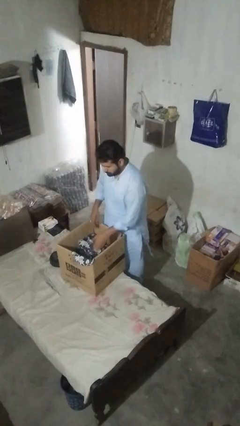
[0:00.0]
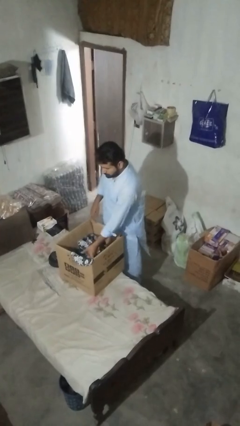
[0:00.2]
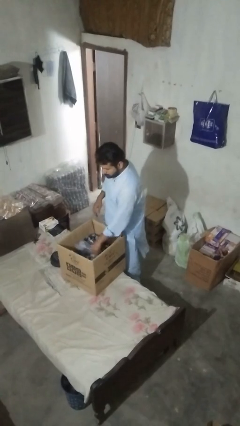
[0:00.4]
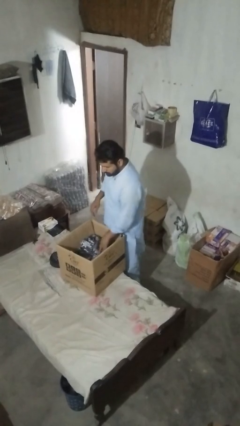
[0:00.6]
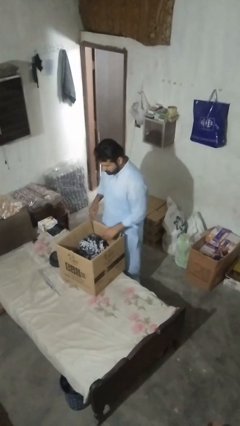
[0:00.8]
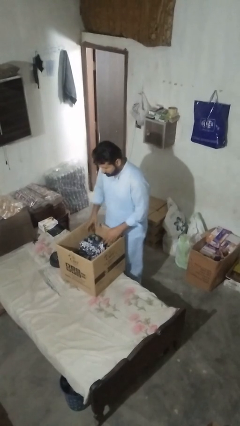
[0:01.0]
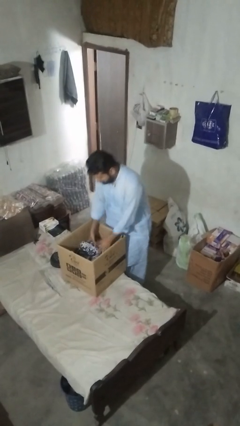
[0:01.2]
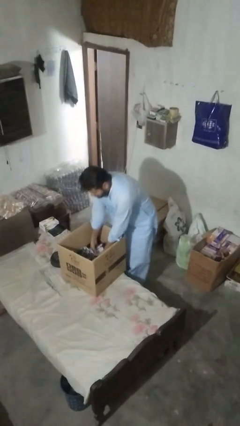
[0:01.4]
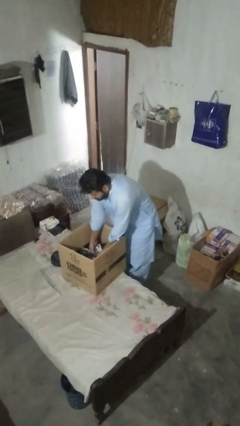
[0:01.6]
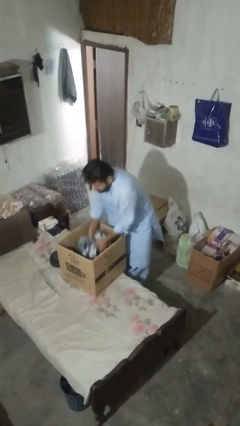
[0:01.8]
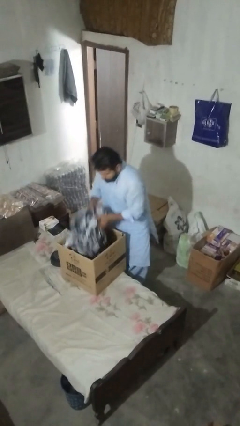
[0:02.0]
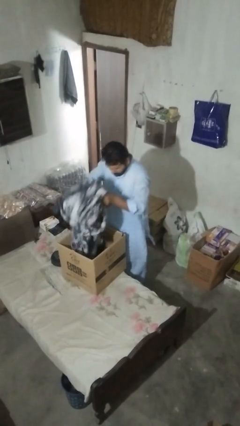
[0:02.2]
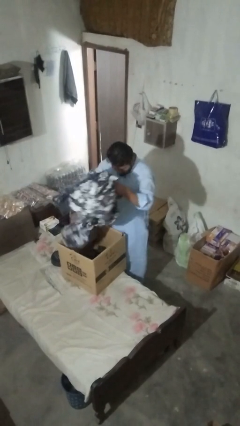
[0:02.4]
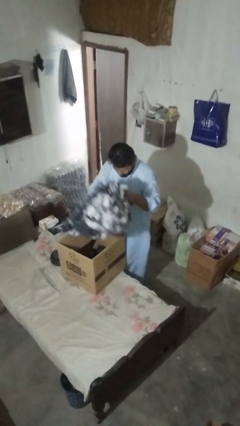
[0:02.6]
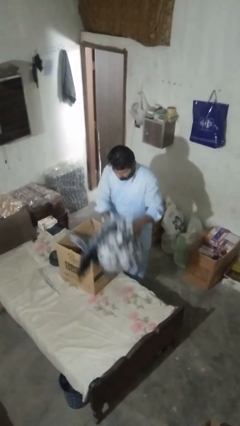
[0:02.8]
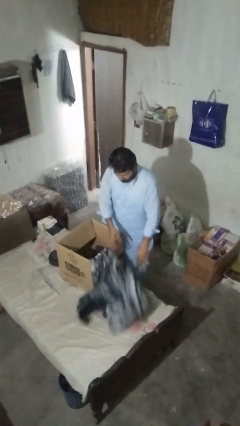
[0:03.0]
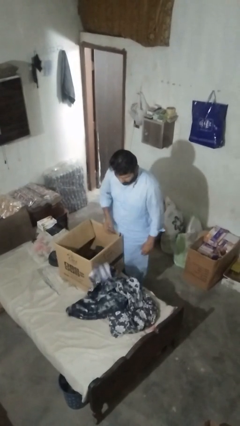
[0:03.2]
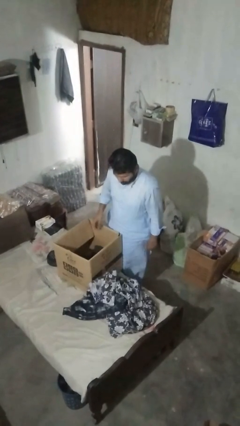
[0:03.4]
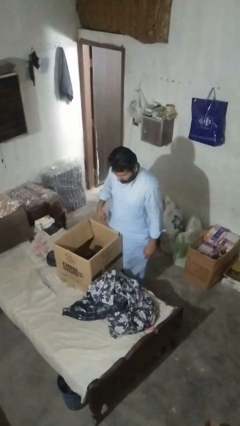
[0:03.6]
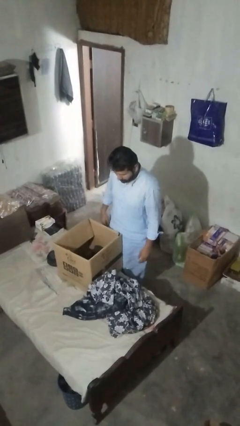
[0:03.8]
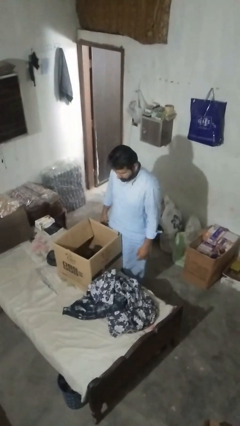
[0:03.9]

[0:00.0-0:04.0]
person unloads clotheswasher

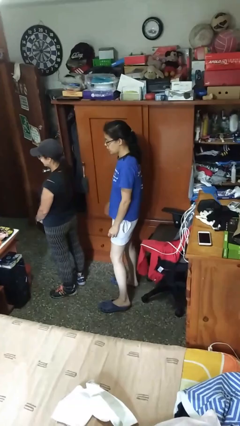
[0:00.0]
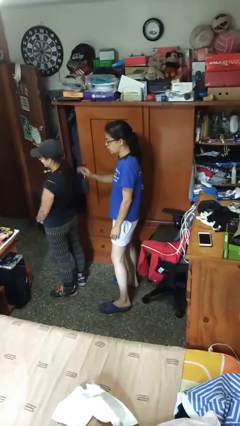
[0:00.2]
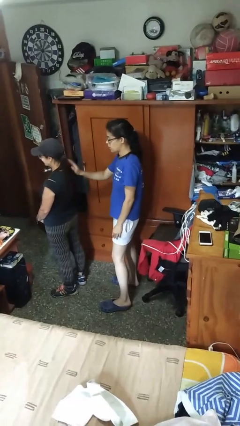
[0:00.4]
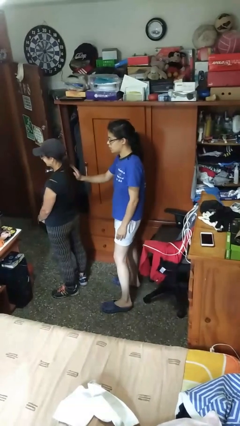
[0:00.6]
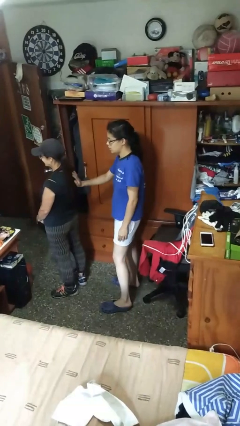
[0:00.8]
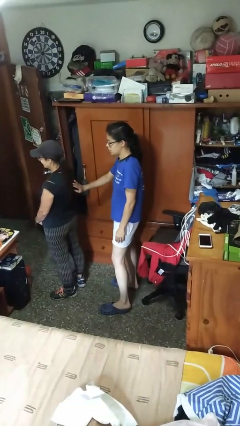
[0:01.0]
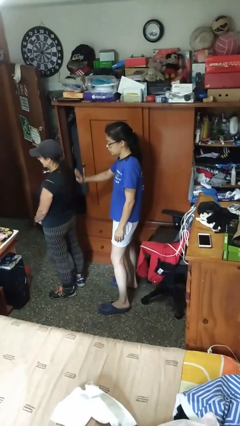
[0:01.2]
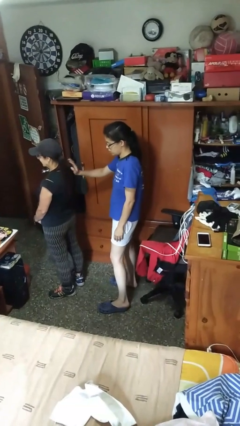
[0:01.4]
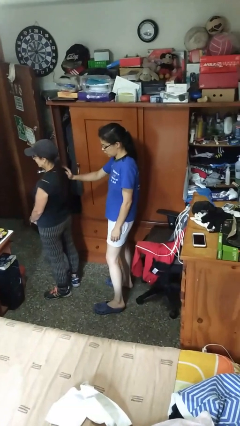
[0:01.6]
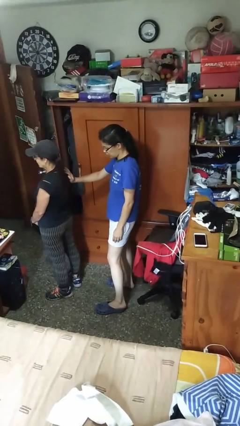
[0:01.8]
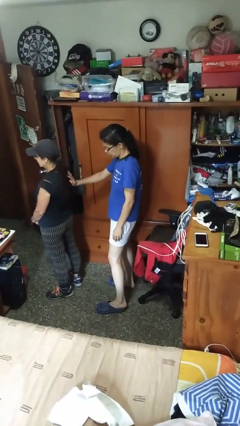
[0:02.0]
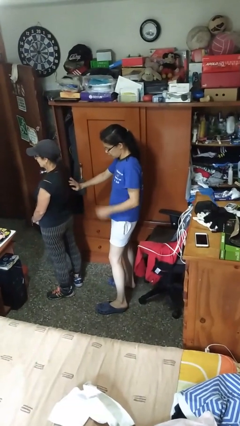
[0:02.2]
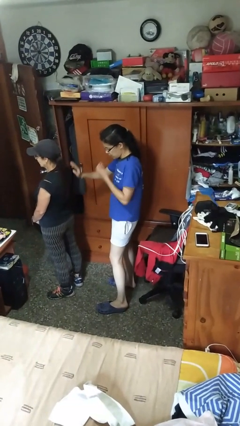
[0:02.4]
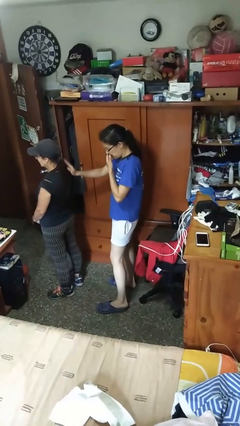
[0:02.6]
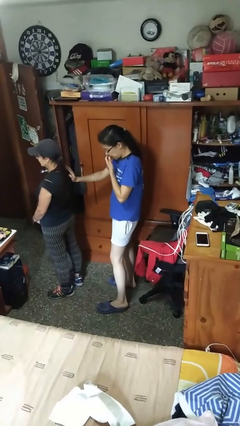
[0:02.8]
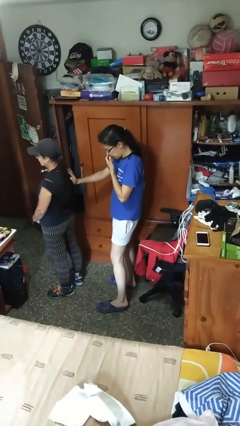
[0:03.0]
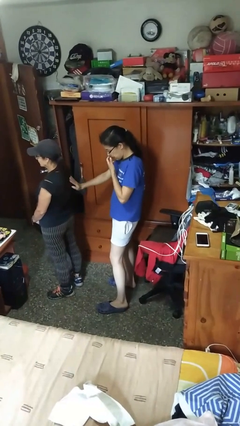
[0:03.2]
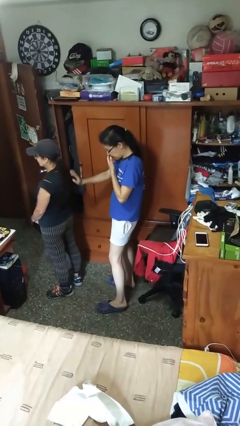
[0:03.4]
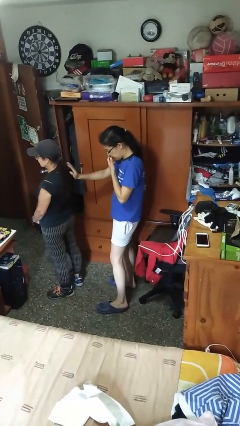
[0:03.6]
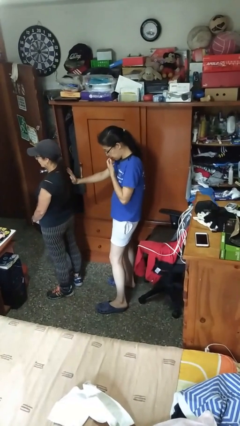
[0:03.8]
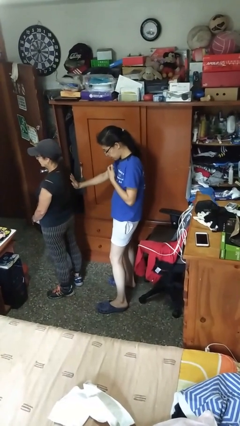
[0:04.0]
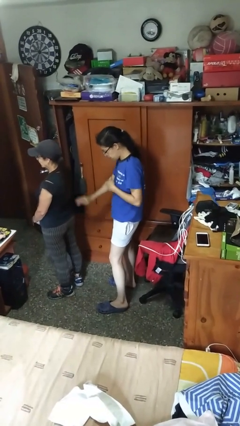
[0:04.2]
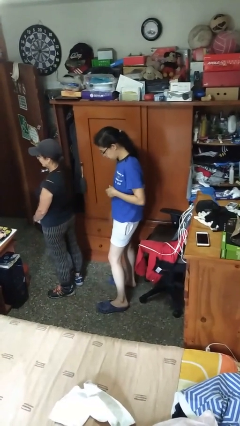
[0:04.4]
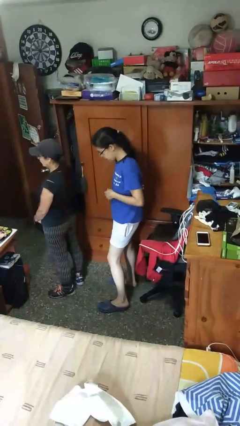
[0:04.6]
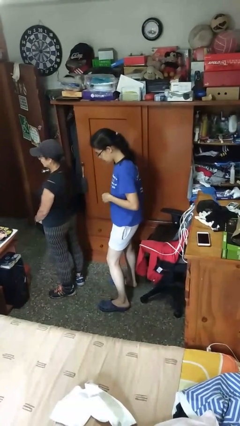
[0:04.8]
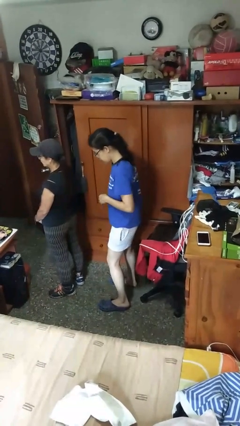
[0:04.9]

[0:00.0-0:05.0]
person touches back of person

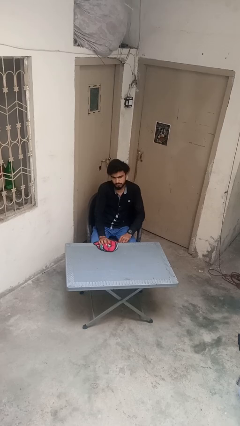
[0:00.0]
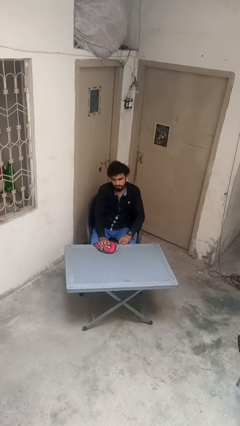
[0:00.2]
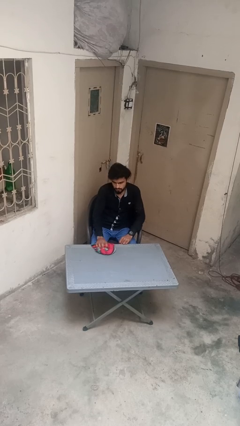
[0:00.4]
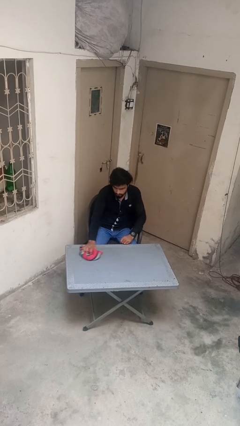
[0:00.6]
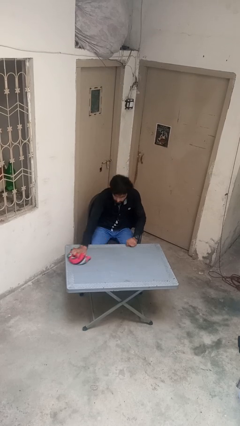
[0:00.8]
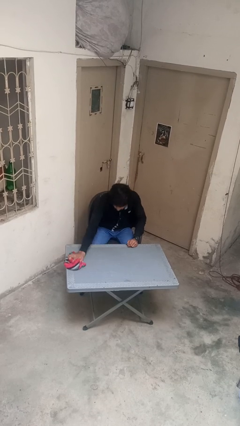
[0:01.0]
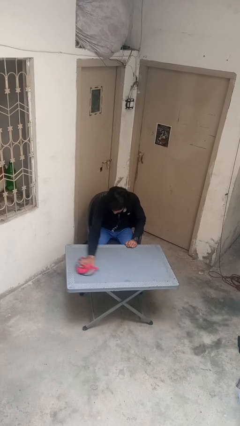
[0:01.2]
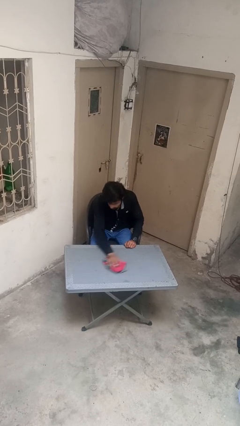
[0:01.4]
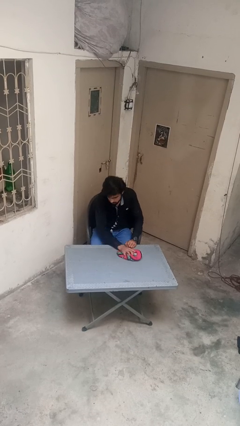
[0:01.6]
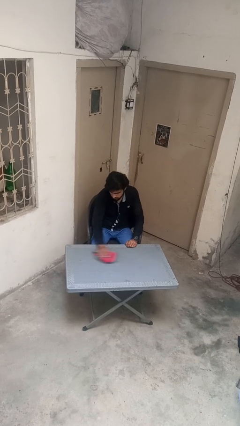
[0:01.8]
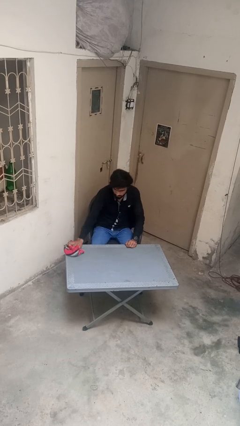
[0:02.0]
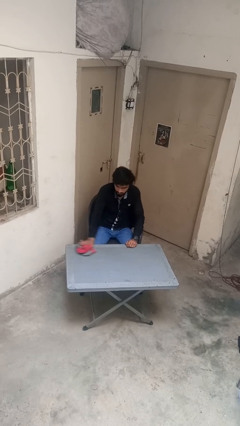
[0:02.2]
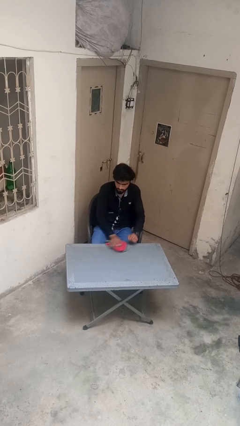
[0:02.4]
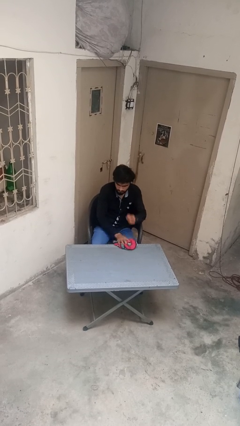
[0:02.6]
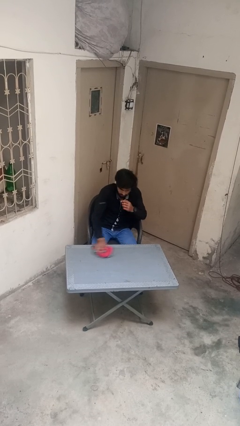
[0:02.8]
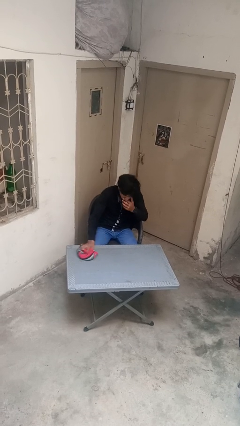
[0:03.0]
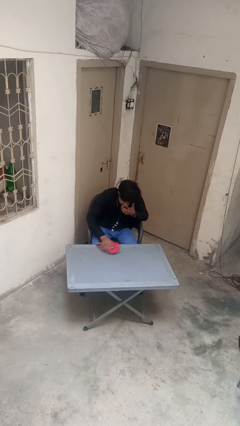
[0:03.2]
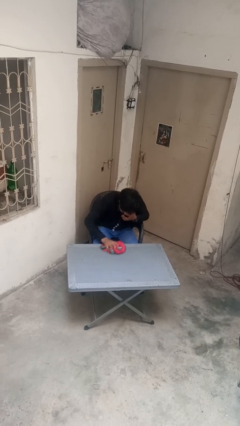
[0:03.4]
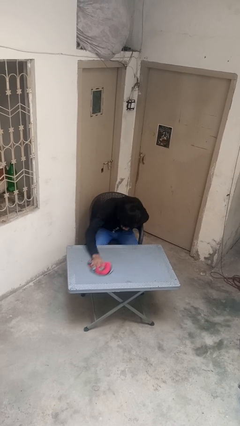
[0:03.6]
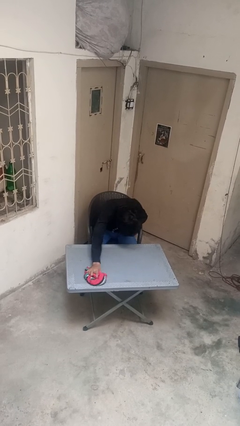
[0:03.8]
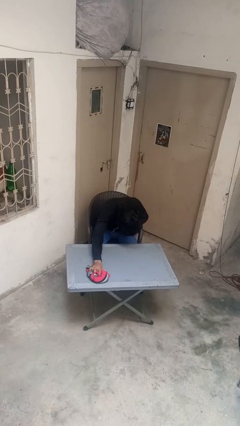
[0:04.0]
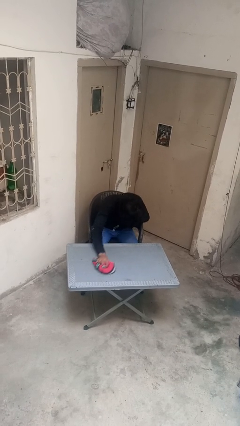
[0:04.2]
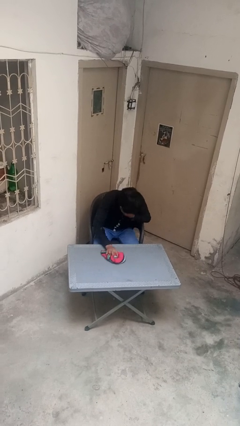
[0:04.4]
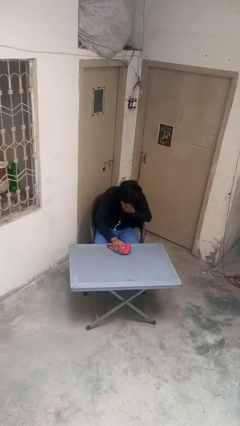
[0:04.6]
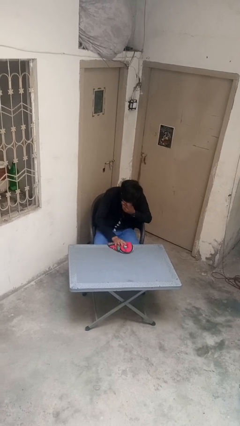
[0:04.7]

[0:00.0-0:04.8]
person cleans table with rag

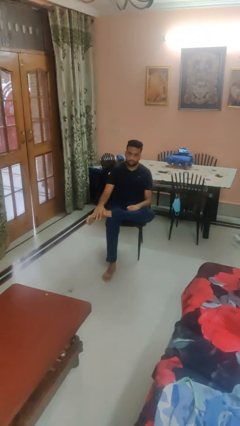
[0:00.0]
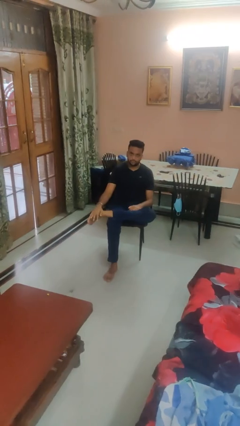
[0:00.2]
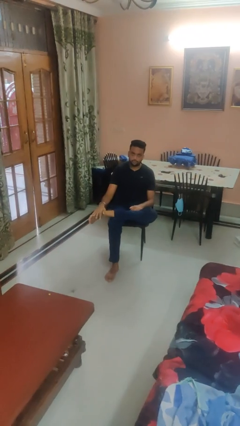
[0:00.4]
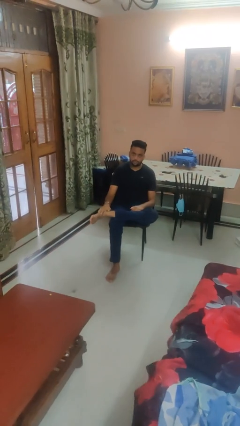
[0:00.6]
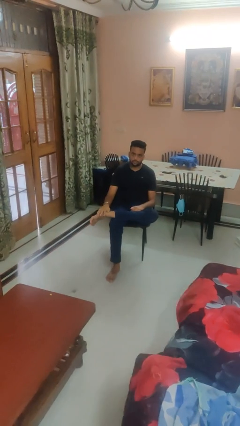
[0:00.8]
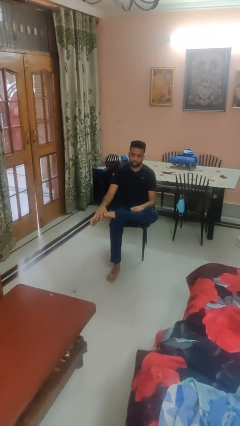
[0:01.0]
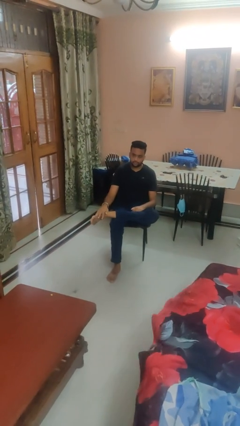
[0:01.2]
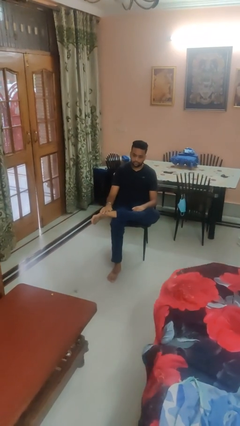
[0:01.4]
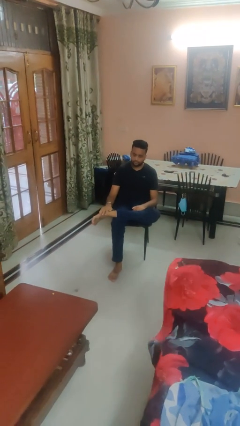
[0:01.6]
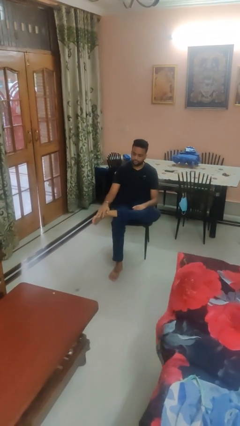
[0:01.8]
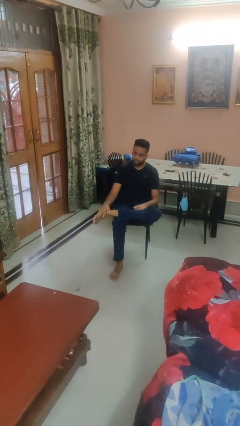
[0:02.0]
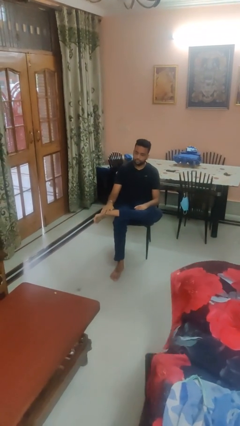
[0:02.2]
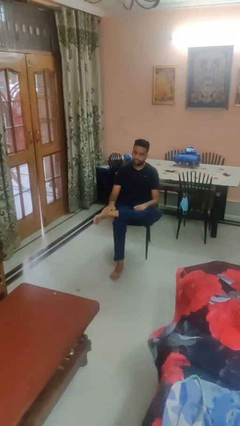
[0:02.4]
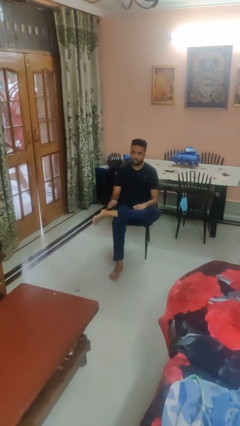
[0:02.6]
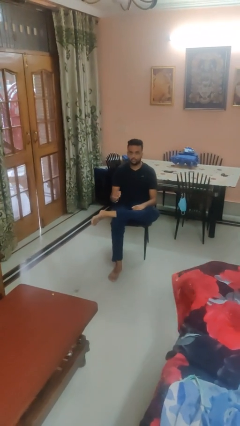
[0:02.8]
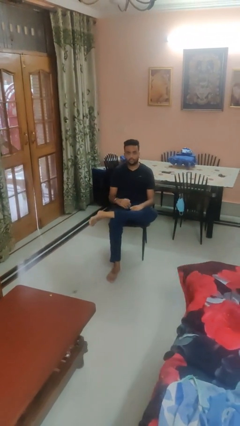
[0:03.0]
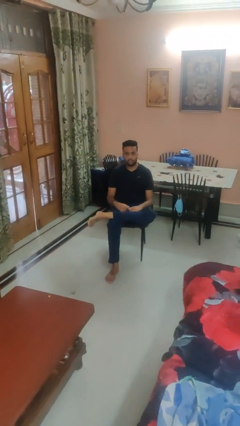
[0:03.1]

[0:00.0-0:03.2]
person rubs foot
